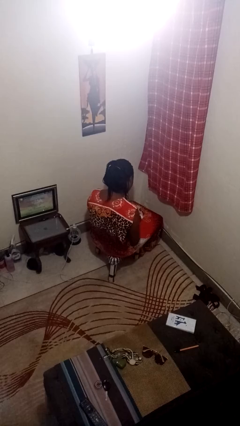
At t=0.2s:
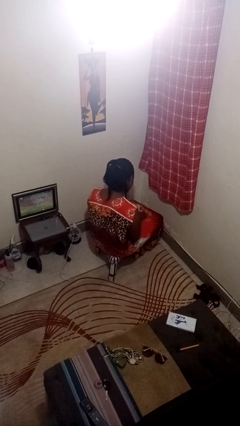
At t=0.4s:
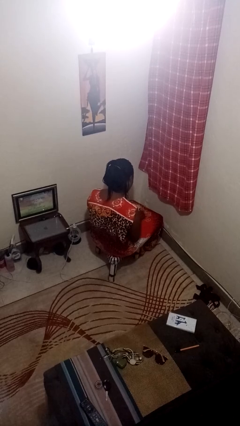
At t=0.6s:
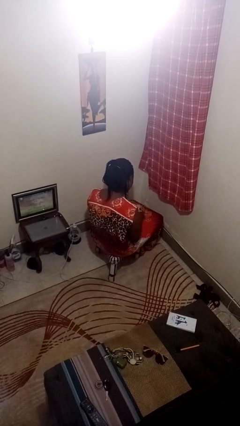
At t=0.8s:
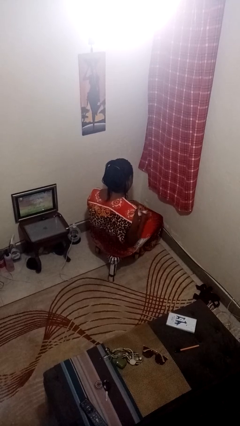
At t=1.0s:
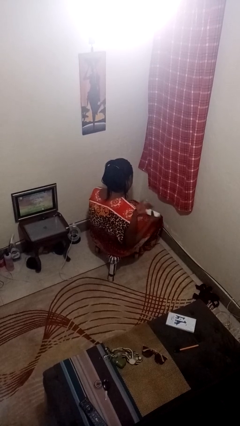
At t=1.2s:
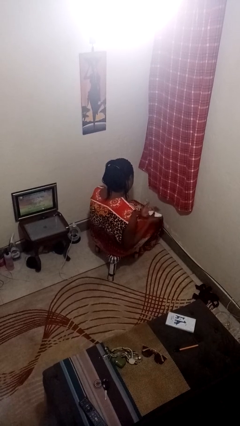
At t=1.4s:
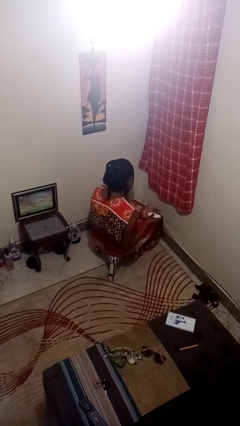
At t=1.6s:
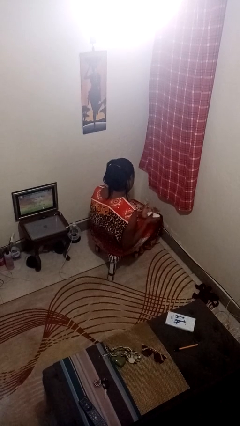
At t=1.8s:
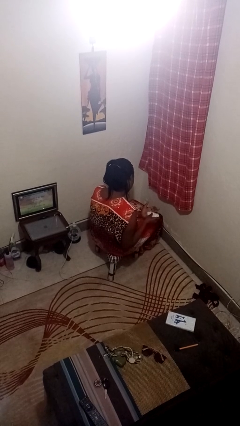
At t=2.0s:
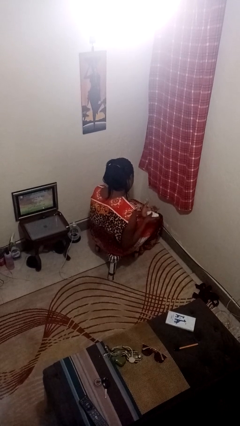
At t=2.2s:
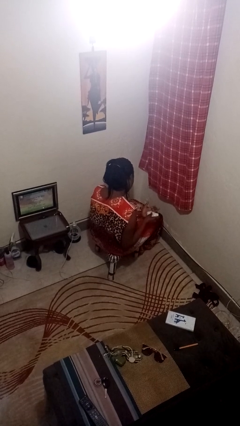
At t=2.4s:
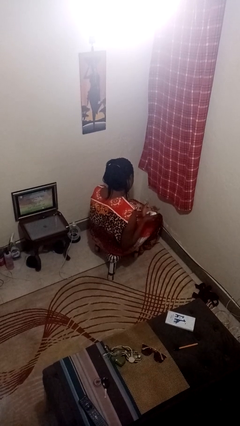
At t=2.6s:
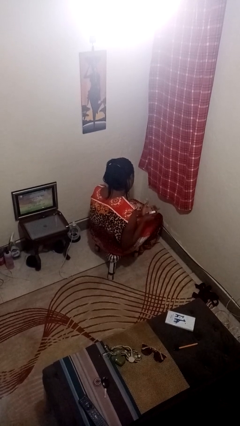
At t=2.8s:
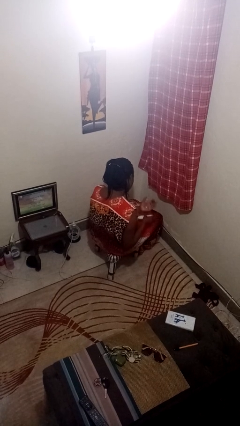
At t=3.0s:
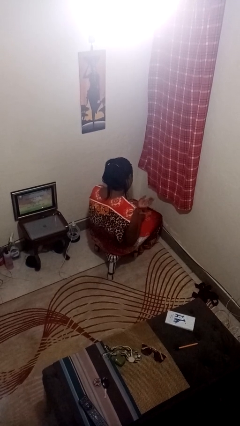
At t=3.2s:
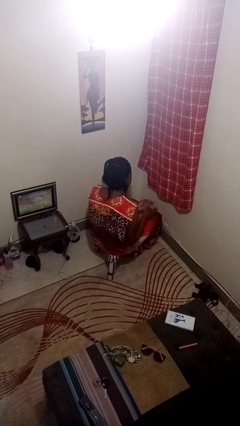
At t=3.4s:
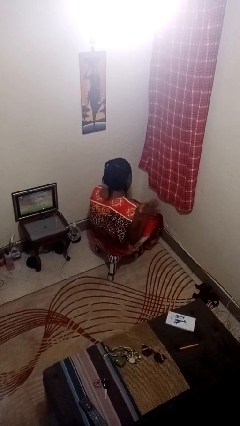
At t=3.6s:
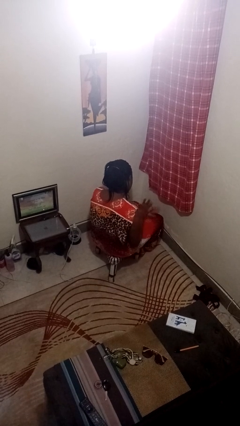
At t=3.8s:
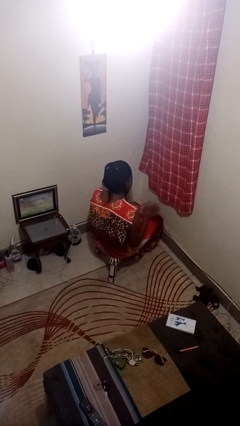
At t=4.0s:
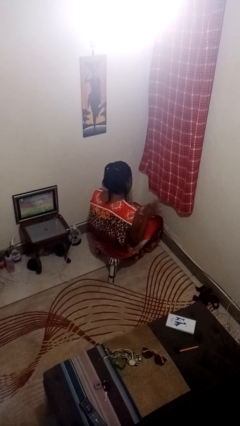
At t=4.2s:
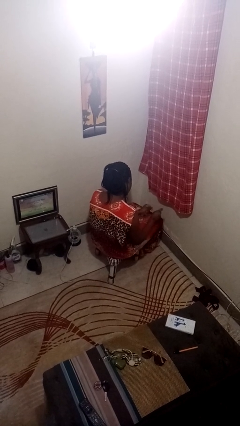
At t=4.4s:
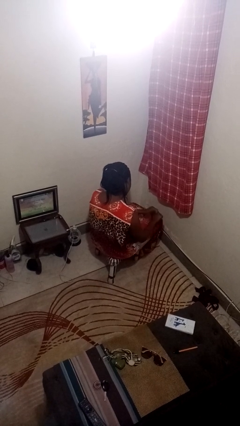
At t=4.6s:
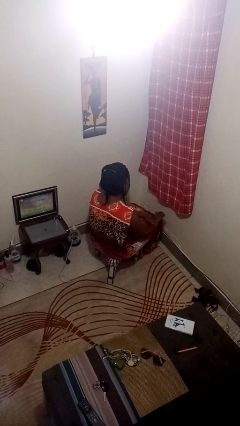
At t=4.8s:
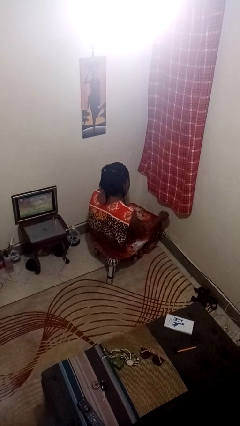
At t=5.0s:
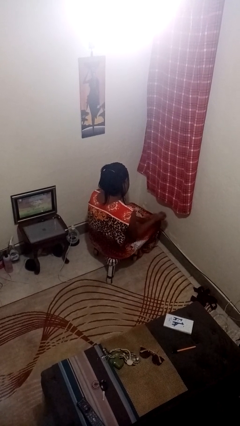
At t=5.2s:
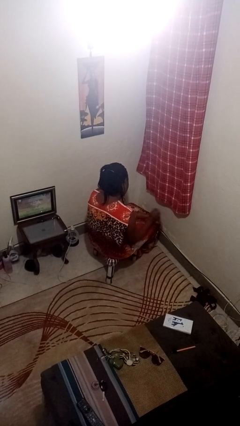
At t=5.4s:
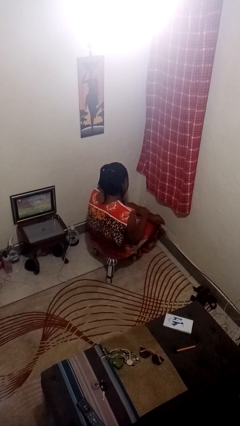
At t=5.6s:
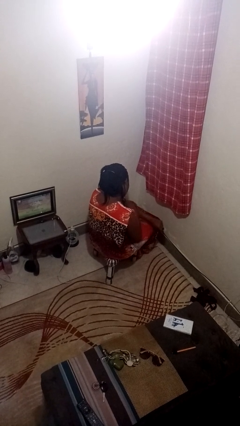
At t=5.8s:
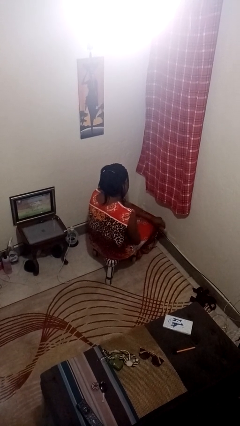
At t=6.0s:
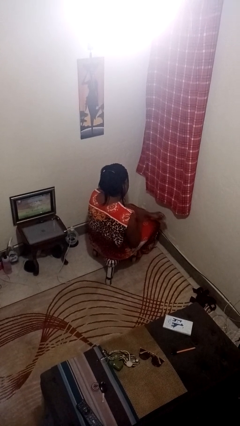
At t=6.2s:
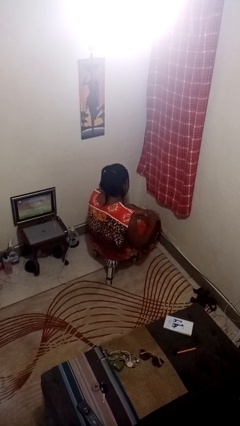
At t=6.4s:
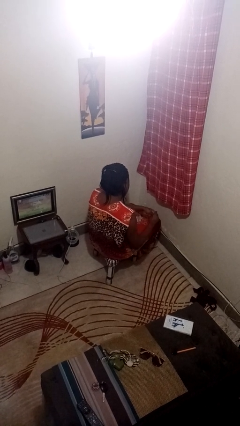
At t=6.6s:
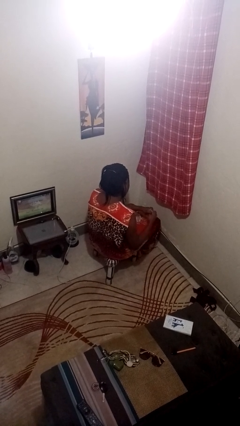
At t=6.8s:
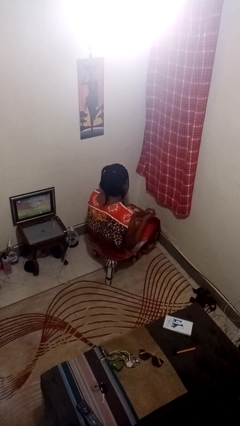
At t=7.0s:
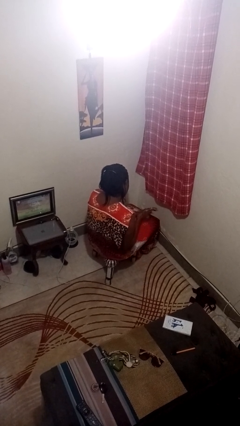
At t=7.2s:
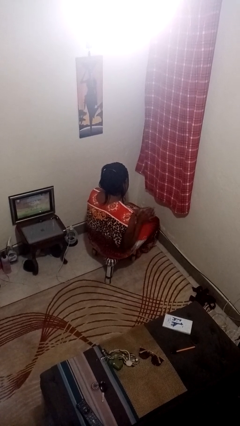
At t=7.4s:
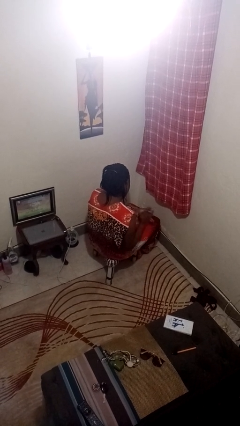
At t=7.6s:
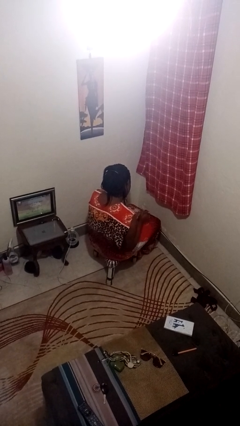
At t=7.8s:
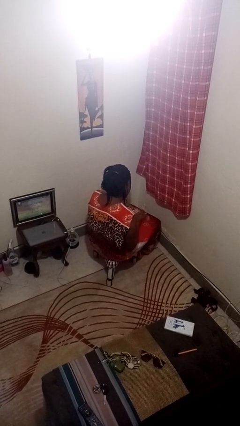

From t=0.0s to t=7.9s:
person applies sunscreen

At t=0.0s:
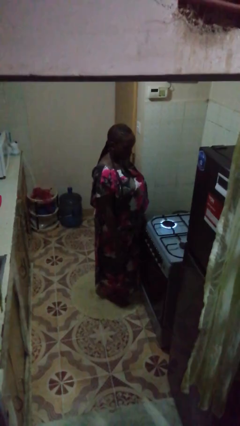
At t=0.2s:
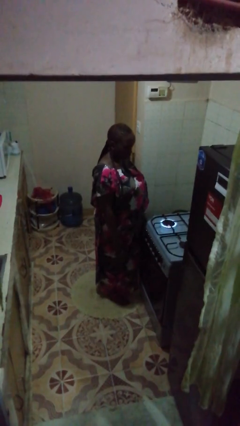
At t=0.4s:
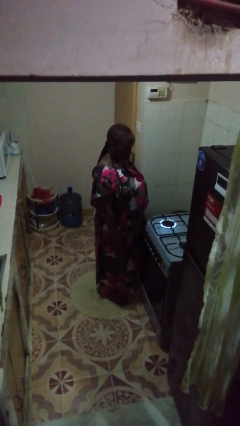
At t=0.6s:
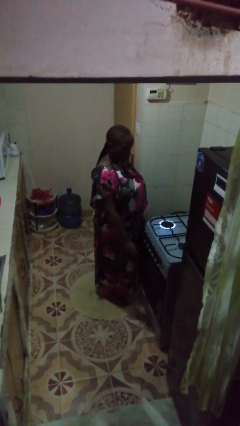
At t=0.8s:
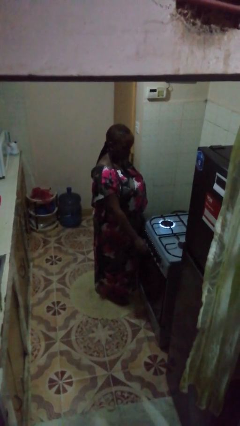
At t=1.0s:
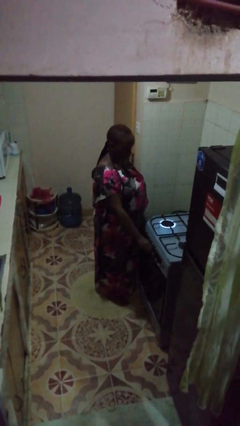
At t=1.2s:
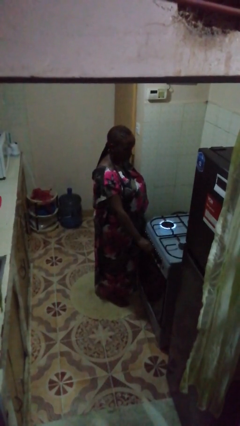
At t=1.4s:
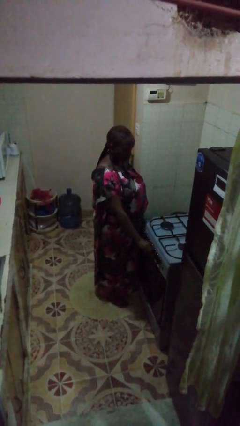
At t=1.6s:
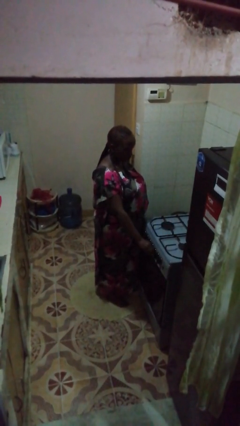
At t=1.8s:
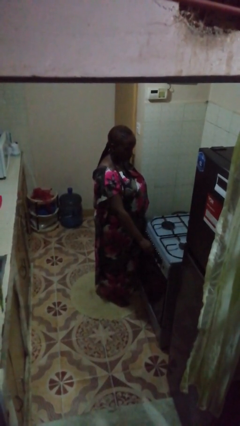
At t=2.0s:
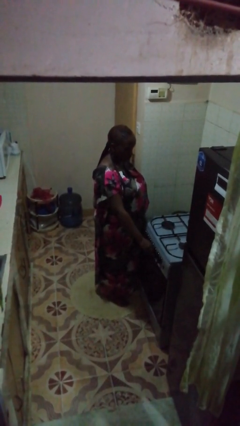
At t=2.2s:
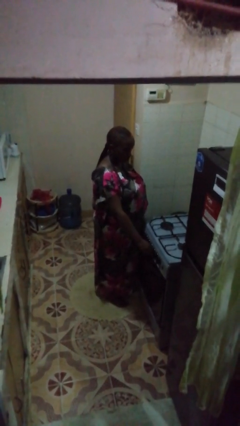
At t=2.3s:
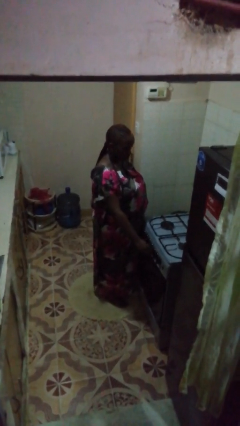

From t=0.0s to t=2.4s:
person turns off stovetop

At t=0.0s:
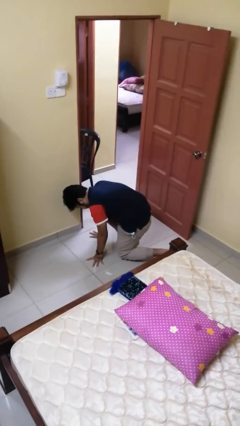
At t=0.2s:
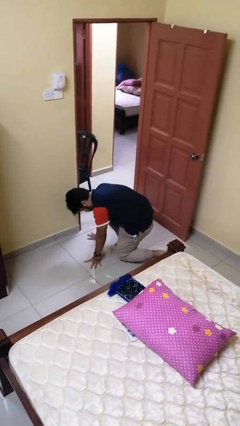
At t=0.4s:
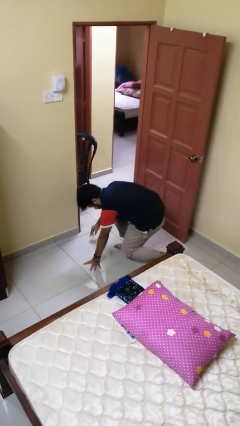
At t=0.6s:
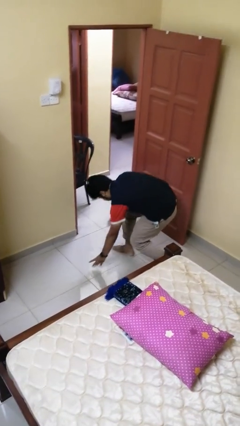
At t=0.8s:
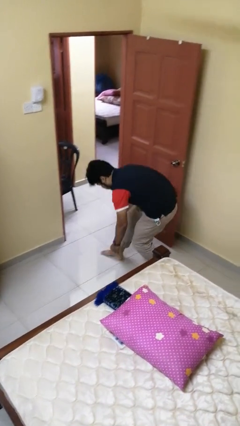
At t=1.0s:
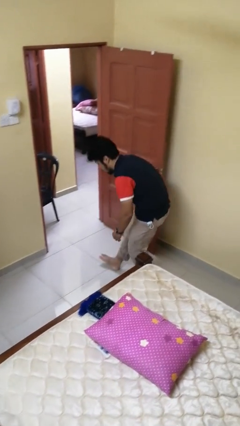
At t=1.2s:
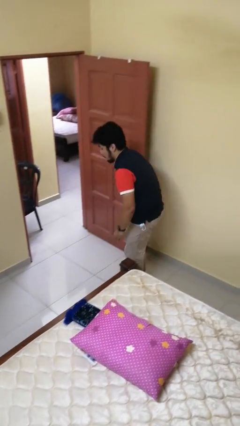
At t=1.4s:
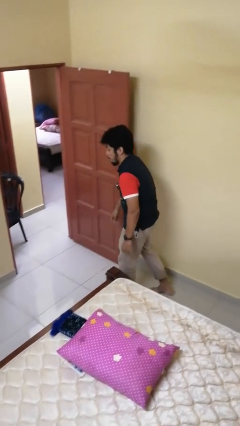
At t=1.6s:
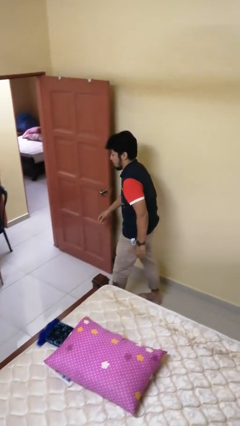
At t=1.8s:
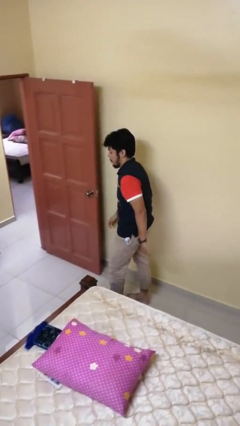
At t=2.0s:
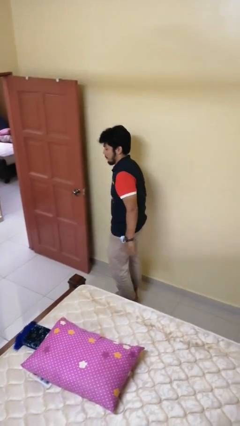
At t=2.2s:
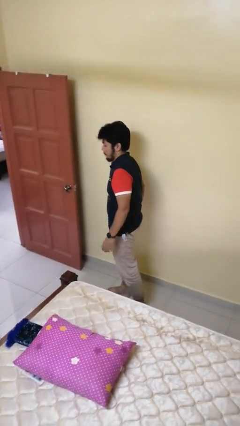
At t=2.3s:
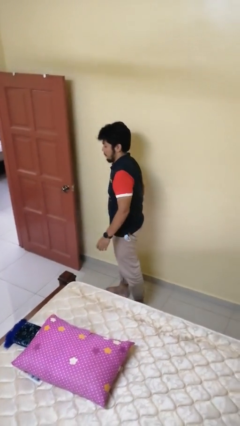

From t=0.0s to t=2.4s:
person stands up from floor

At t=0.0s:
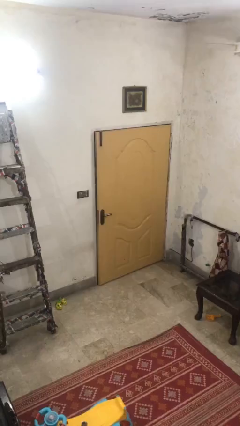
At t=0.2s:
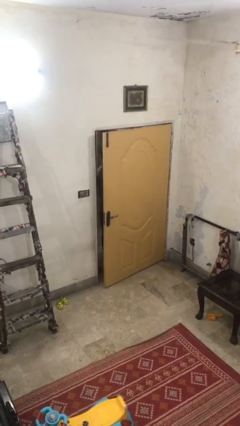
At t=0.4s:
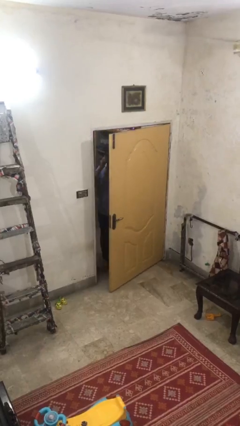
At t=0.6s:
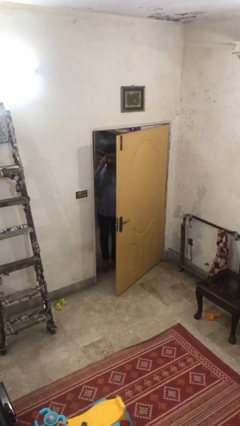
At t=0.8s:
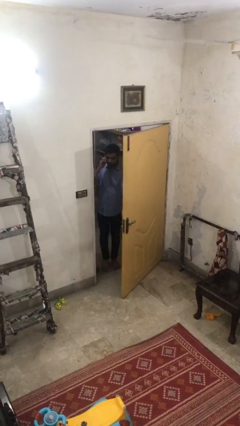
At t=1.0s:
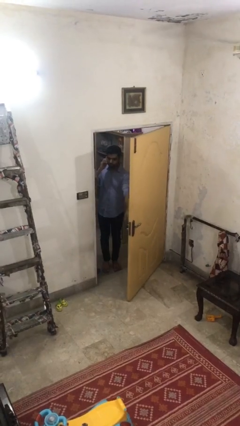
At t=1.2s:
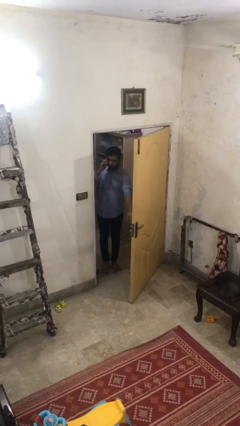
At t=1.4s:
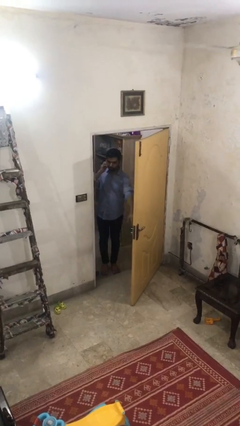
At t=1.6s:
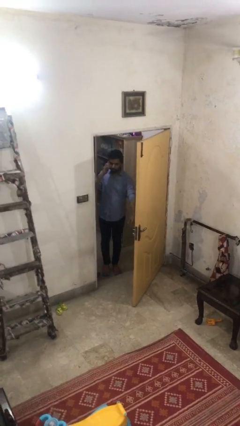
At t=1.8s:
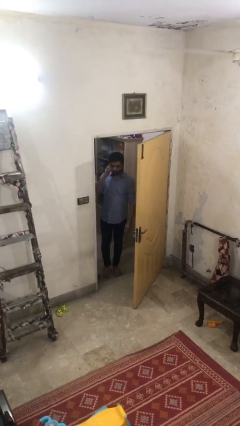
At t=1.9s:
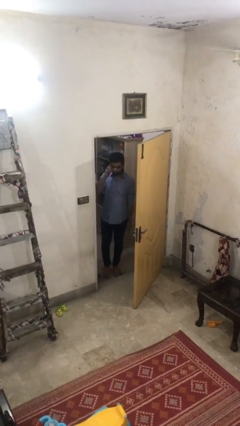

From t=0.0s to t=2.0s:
person opens facility door

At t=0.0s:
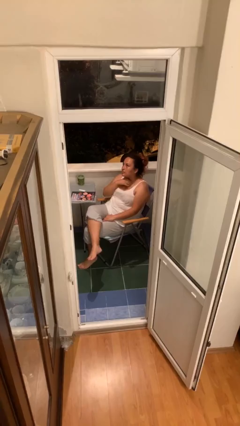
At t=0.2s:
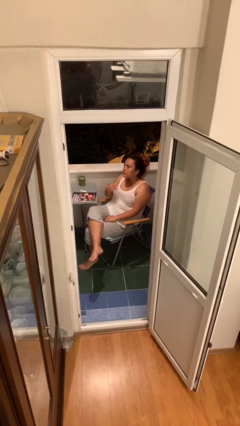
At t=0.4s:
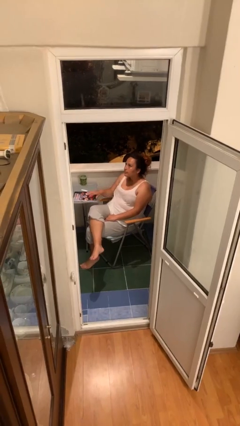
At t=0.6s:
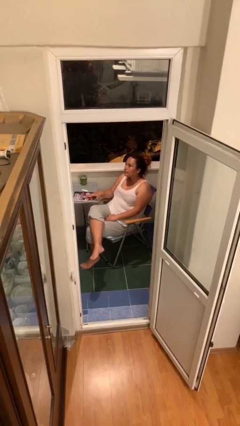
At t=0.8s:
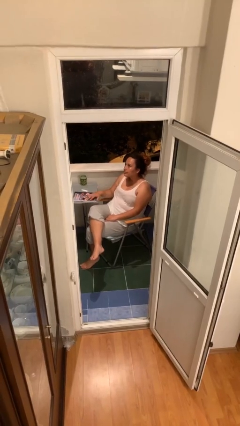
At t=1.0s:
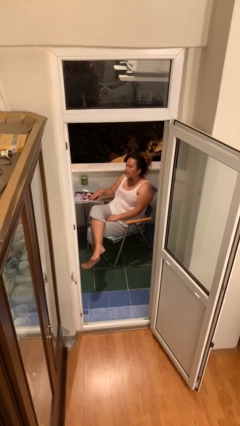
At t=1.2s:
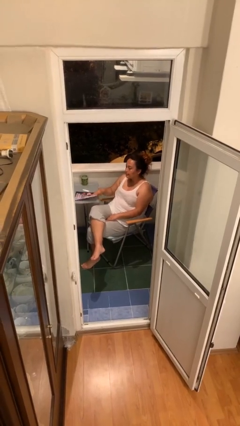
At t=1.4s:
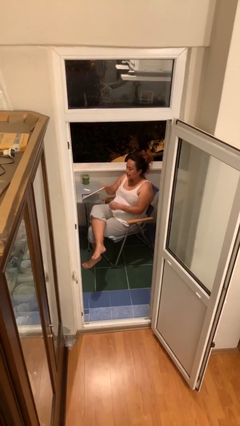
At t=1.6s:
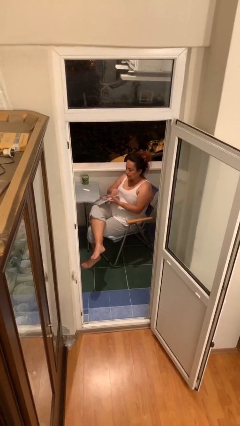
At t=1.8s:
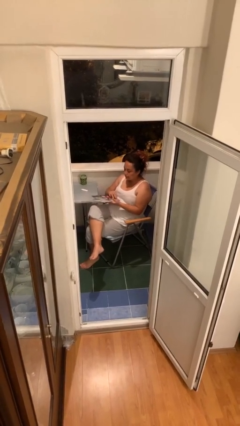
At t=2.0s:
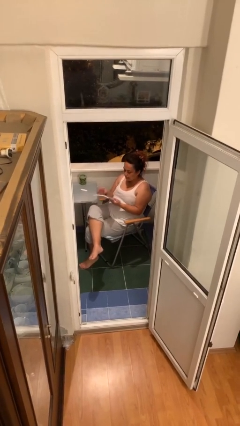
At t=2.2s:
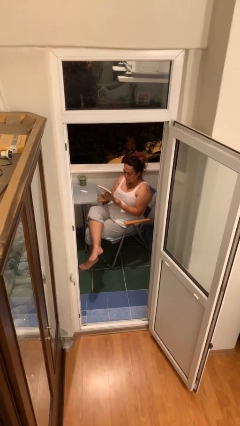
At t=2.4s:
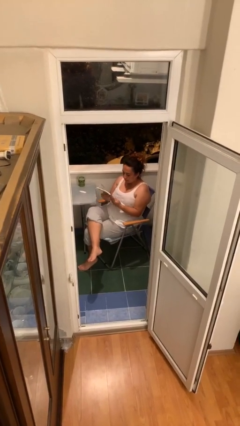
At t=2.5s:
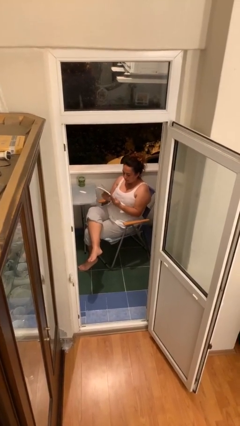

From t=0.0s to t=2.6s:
person picks up object from table
